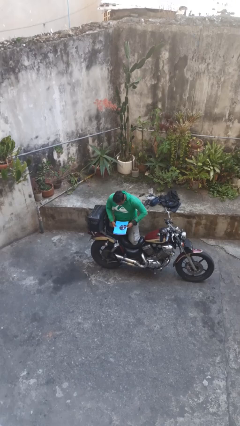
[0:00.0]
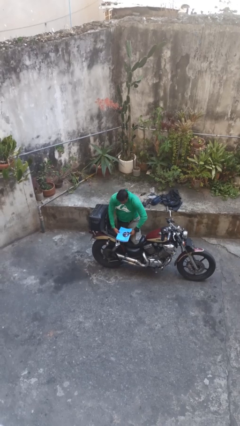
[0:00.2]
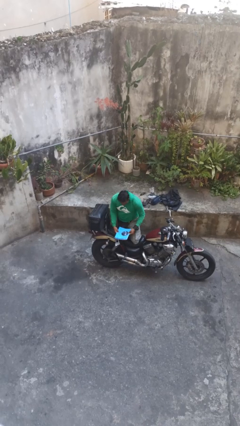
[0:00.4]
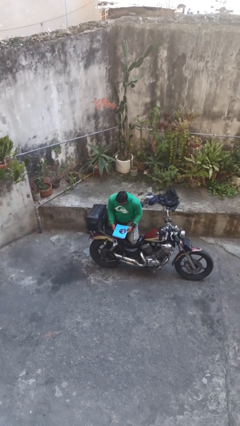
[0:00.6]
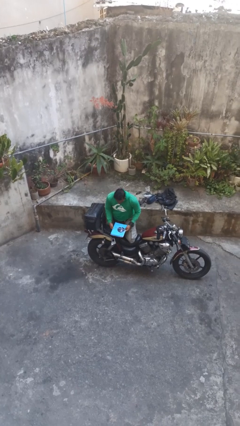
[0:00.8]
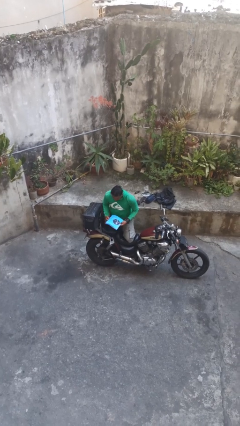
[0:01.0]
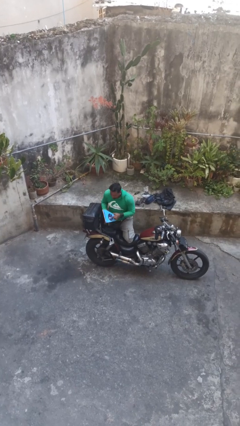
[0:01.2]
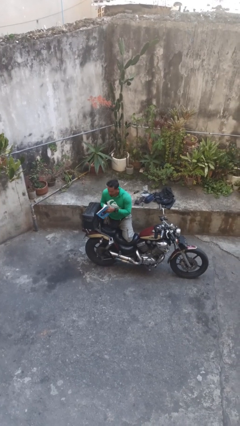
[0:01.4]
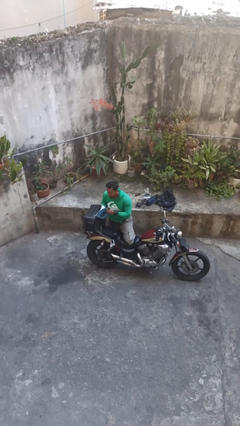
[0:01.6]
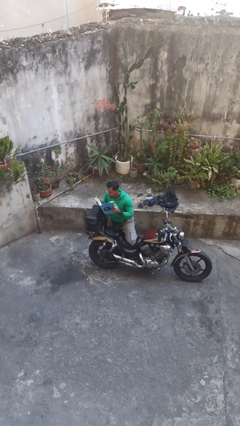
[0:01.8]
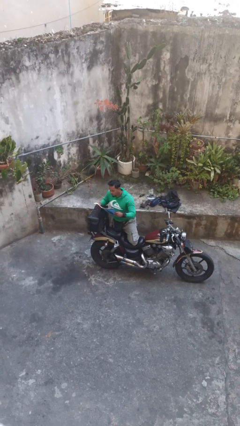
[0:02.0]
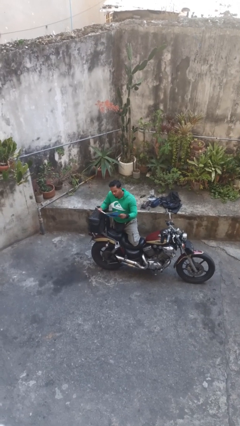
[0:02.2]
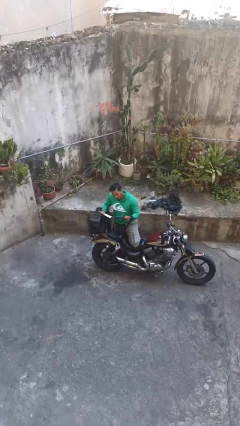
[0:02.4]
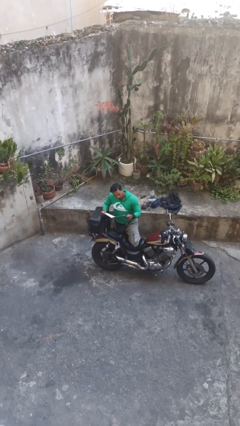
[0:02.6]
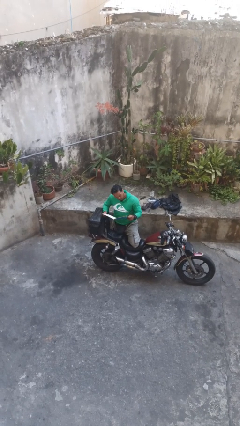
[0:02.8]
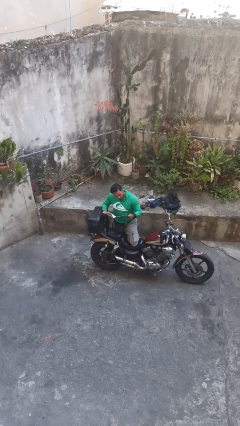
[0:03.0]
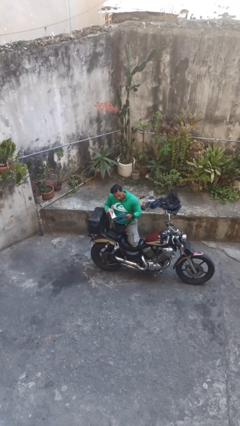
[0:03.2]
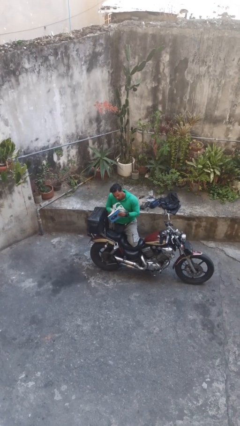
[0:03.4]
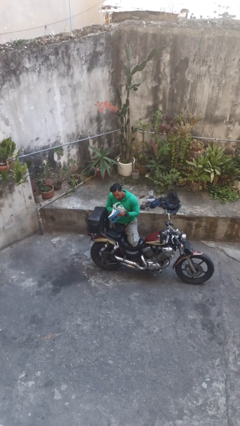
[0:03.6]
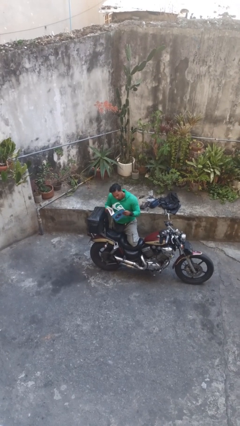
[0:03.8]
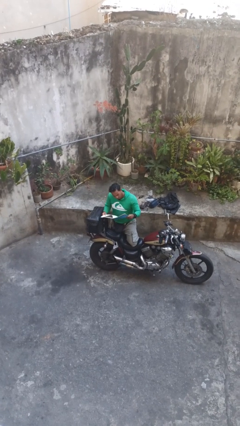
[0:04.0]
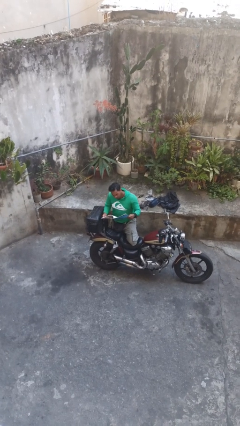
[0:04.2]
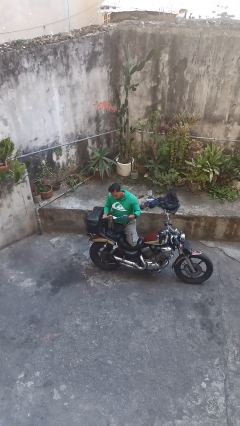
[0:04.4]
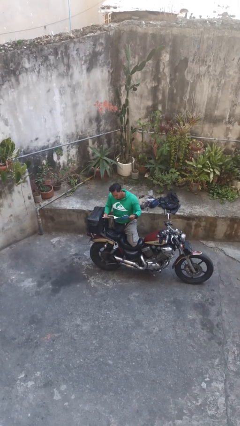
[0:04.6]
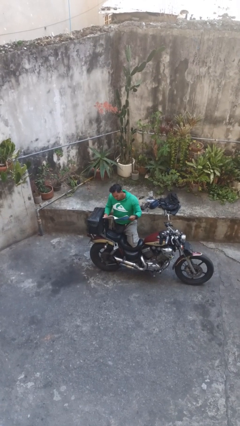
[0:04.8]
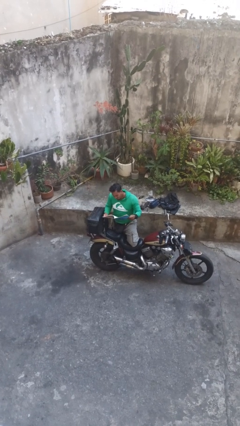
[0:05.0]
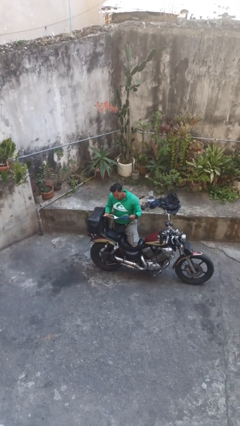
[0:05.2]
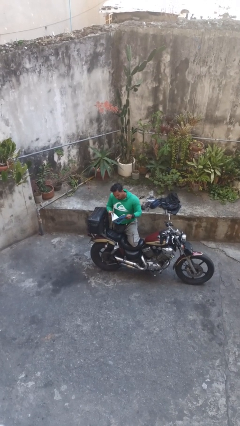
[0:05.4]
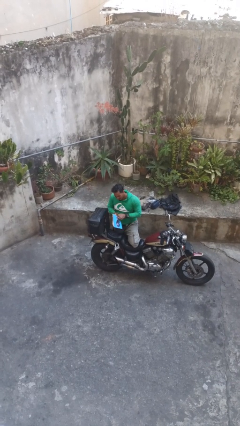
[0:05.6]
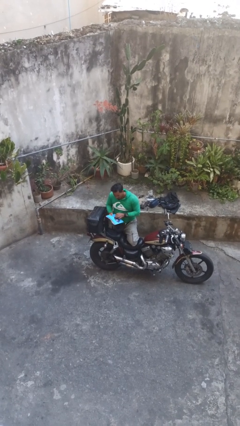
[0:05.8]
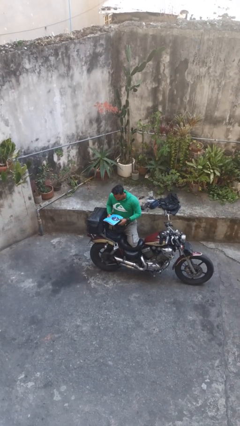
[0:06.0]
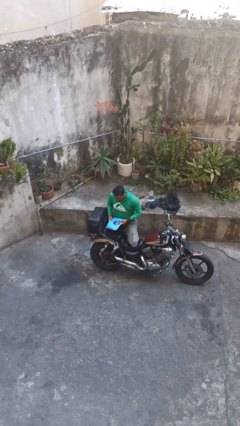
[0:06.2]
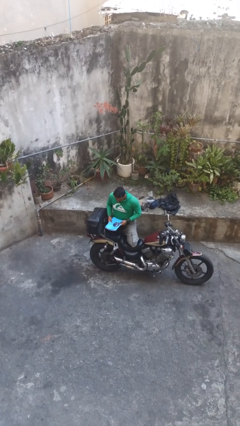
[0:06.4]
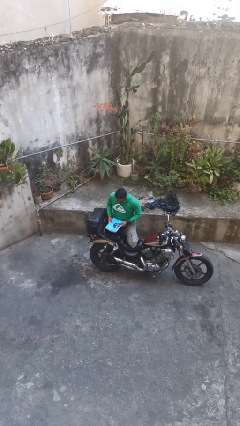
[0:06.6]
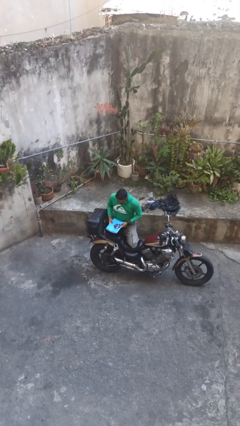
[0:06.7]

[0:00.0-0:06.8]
person reads document

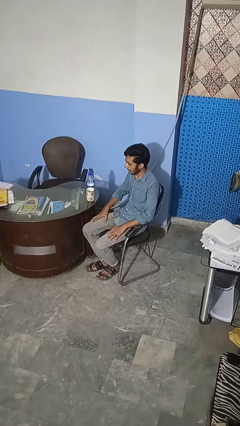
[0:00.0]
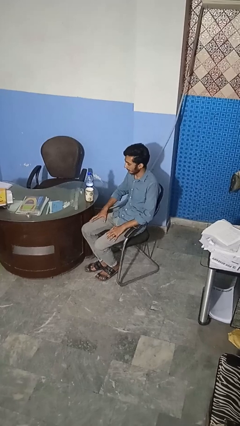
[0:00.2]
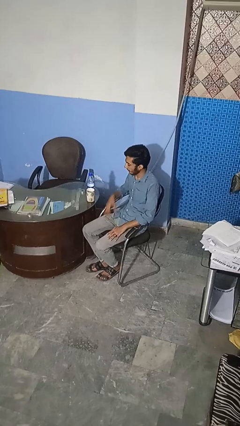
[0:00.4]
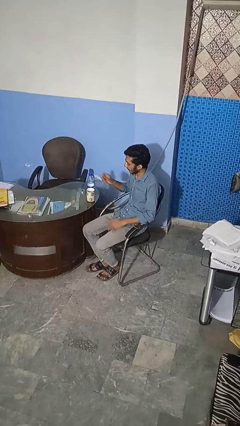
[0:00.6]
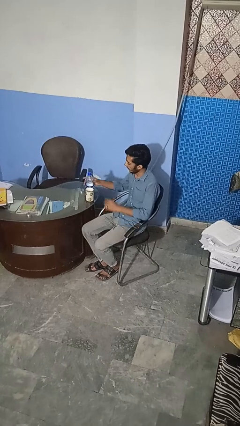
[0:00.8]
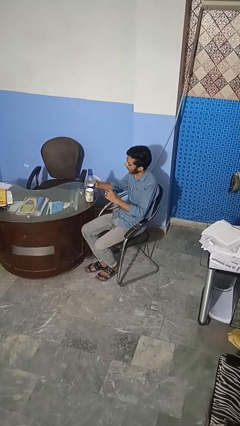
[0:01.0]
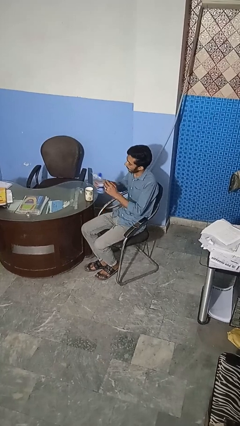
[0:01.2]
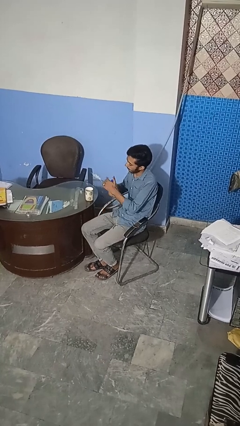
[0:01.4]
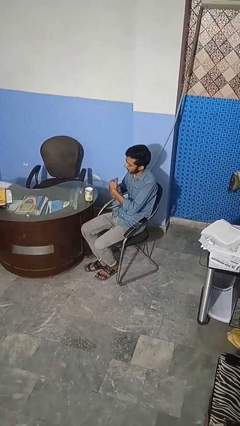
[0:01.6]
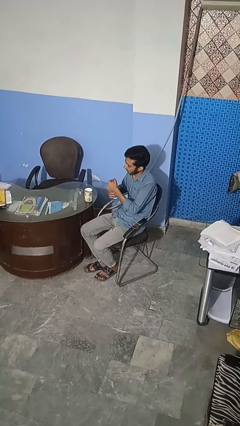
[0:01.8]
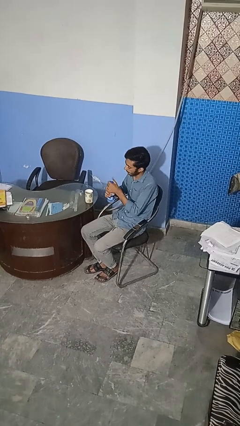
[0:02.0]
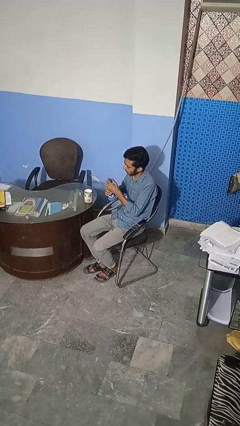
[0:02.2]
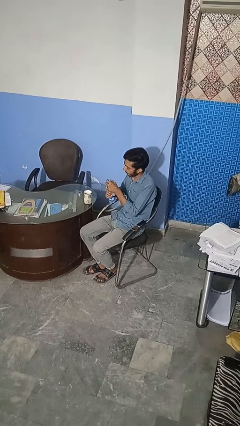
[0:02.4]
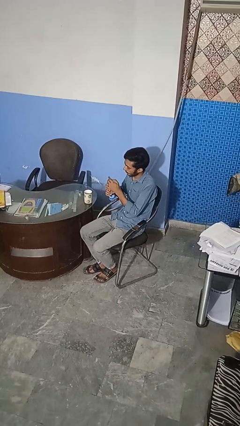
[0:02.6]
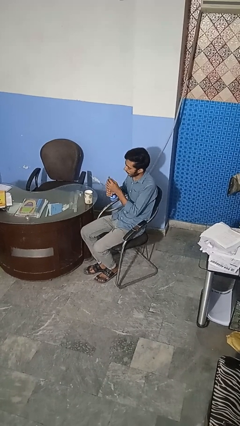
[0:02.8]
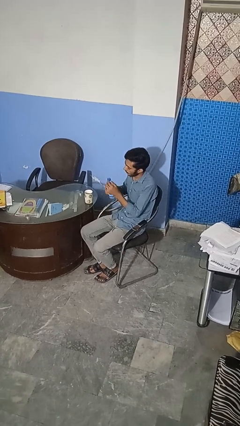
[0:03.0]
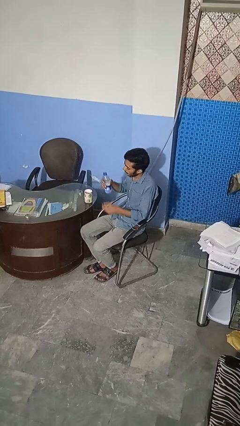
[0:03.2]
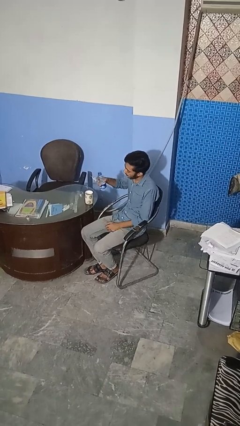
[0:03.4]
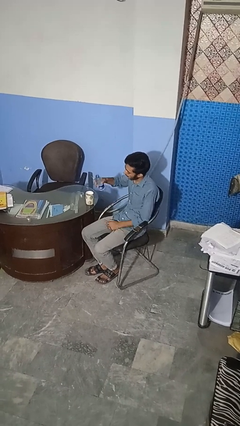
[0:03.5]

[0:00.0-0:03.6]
person unscrews lid from bottle

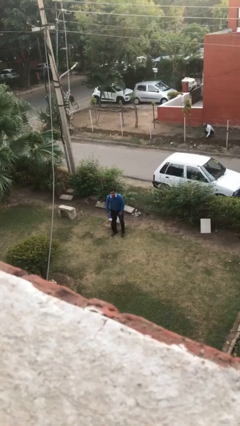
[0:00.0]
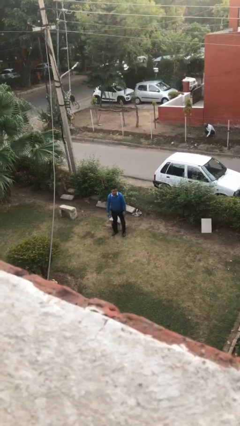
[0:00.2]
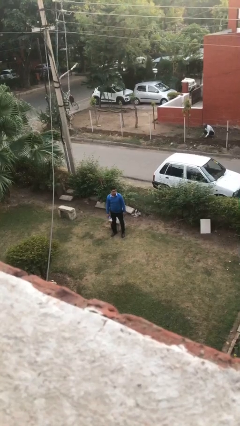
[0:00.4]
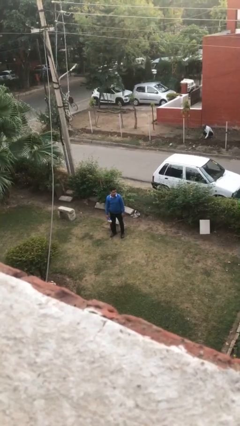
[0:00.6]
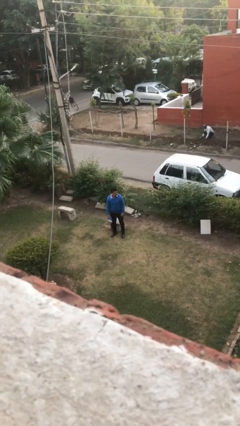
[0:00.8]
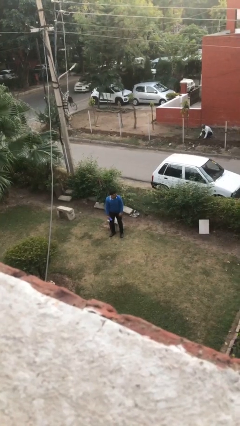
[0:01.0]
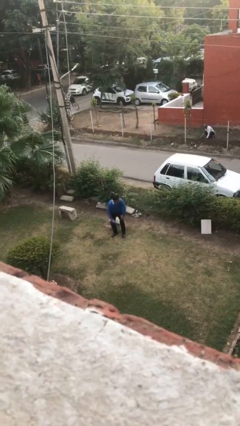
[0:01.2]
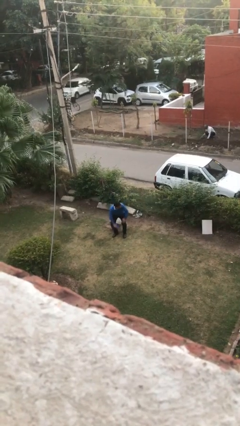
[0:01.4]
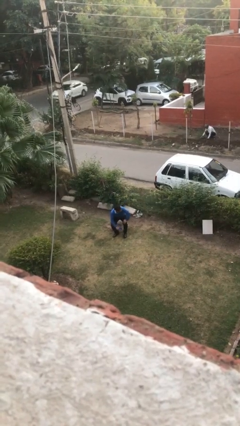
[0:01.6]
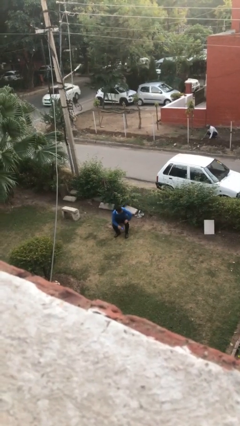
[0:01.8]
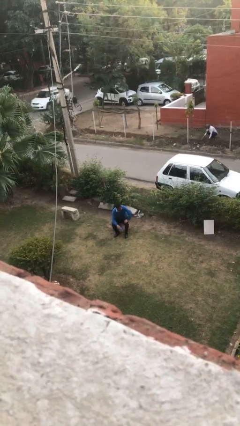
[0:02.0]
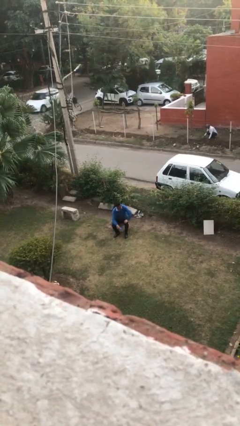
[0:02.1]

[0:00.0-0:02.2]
person sits down

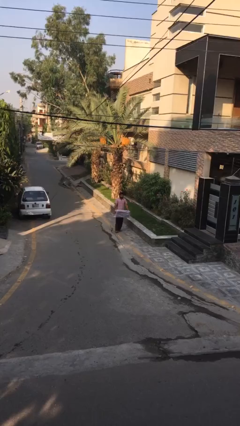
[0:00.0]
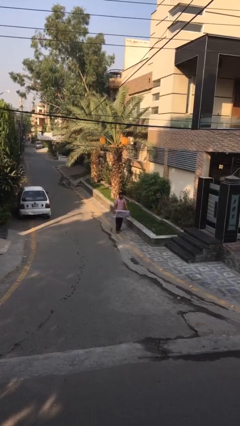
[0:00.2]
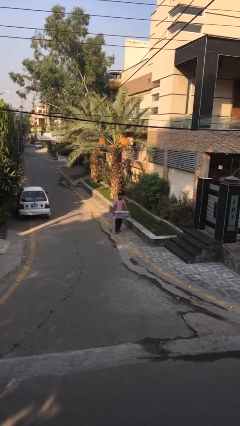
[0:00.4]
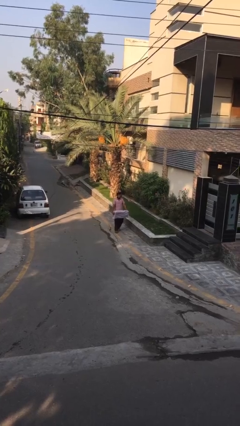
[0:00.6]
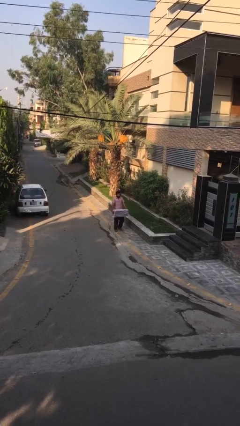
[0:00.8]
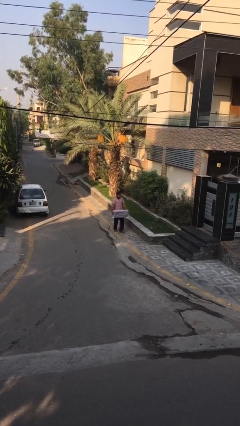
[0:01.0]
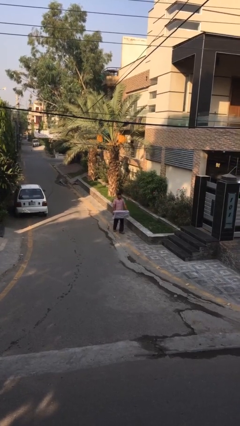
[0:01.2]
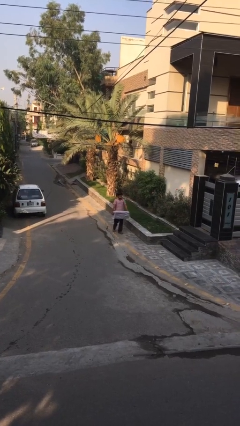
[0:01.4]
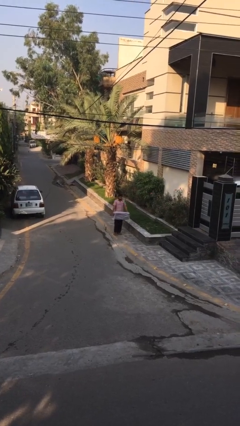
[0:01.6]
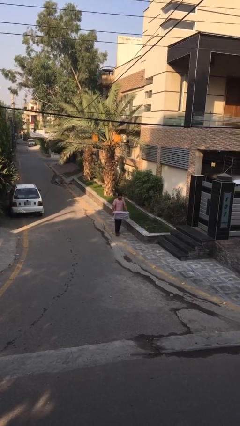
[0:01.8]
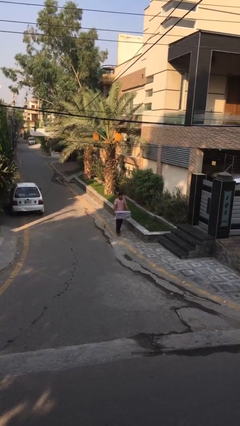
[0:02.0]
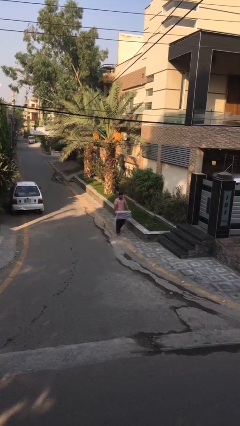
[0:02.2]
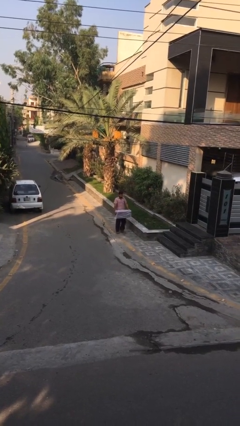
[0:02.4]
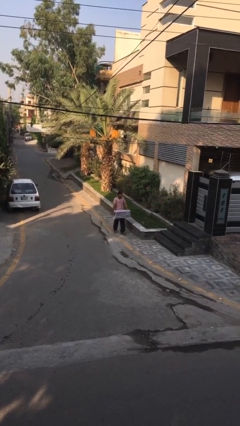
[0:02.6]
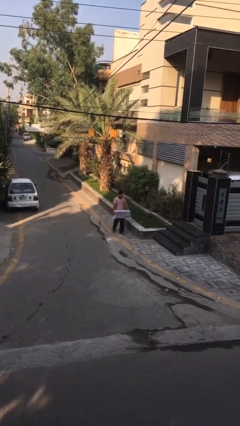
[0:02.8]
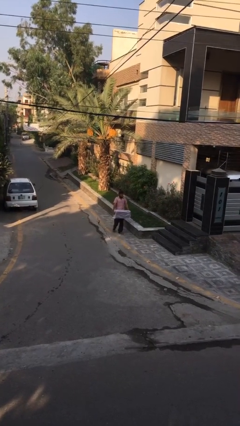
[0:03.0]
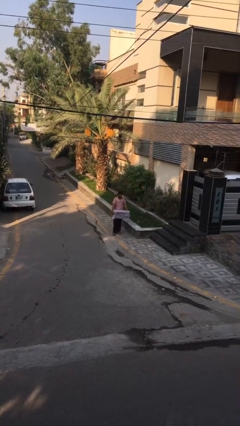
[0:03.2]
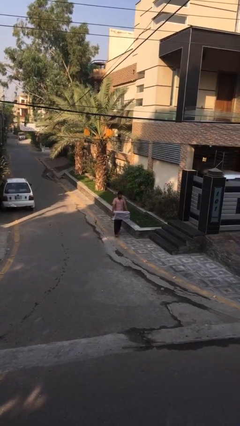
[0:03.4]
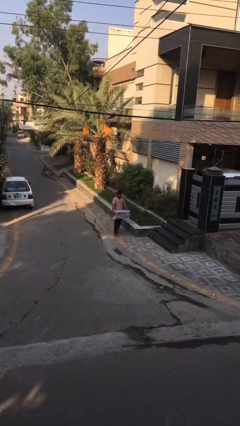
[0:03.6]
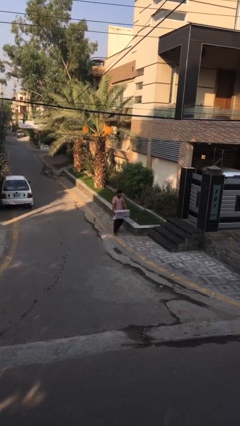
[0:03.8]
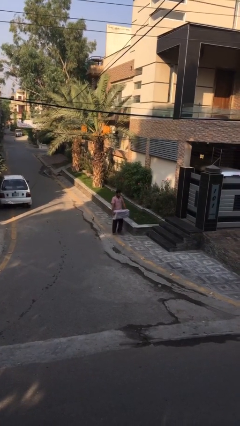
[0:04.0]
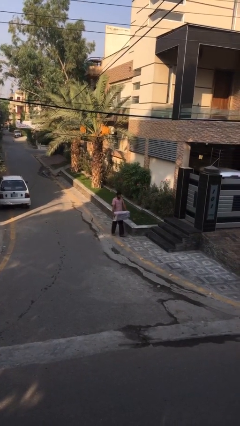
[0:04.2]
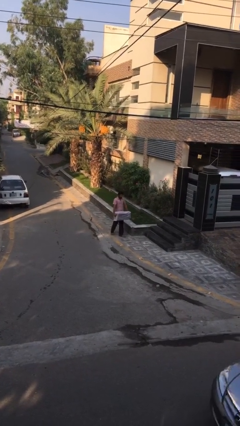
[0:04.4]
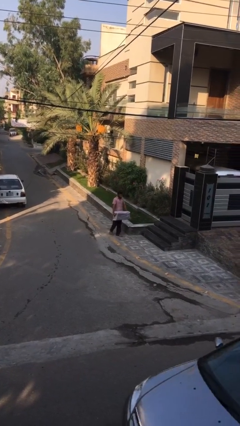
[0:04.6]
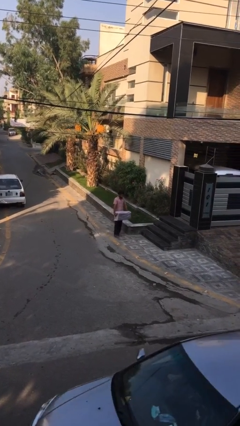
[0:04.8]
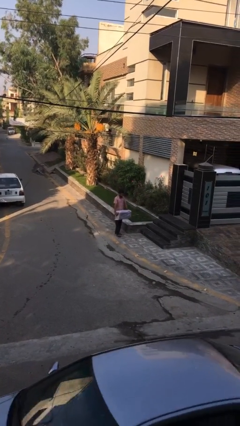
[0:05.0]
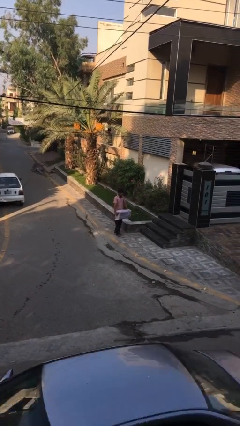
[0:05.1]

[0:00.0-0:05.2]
person carries heavy object
